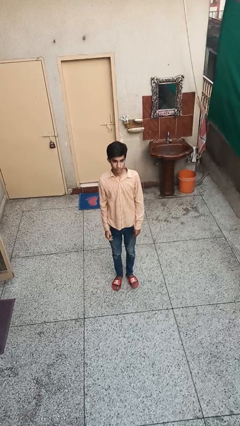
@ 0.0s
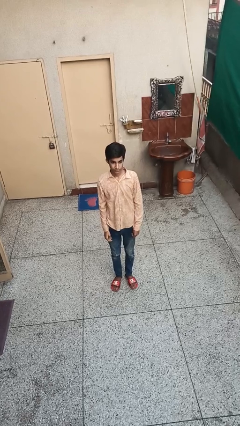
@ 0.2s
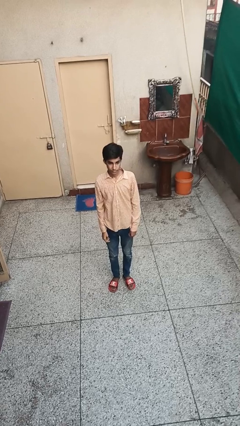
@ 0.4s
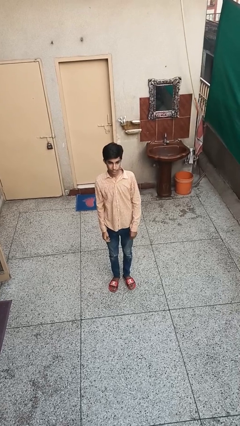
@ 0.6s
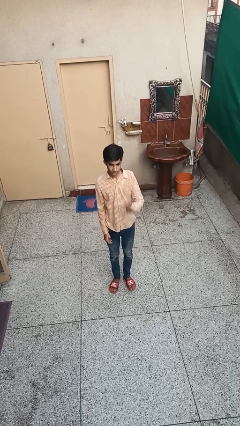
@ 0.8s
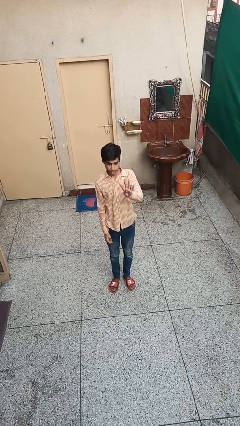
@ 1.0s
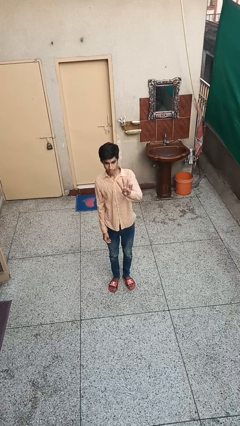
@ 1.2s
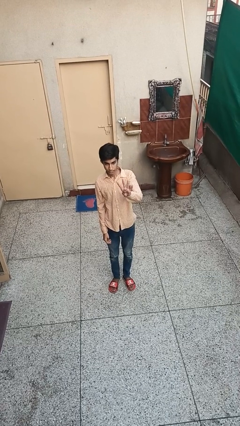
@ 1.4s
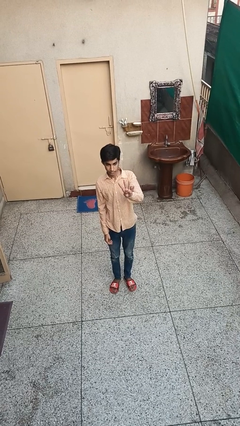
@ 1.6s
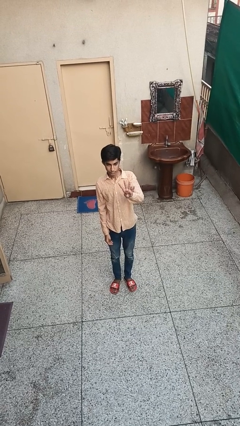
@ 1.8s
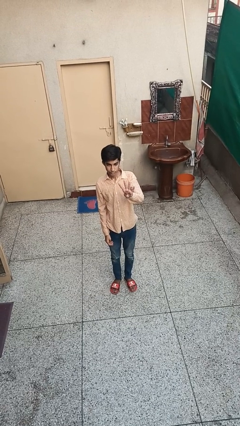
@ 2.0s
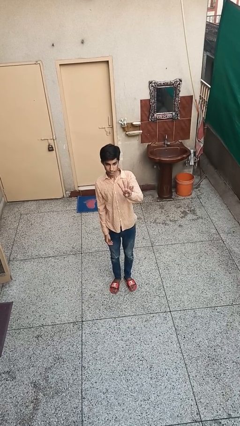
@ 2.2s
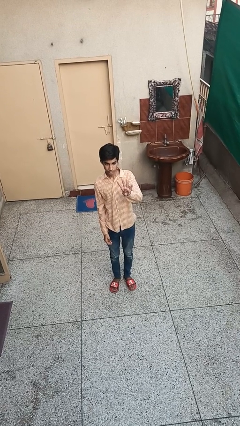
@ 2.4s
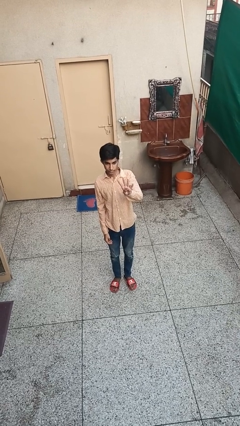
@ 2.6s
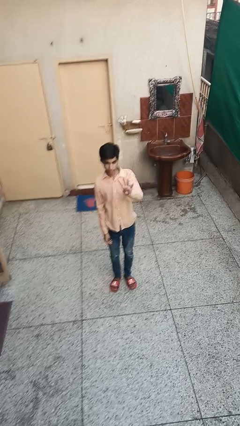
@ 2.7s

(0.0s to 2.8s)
person gestures number four

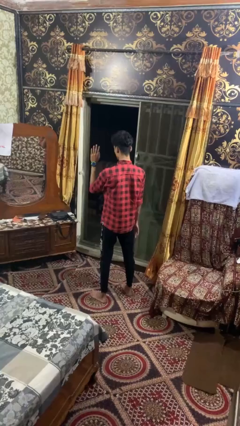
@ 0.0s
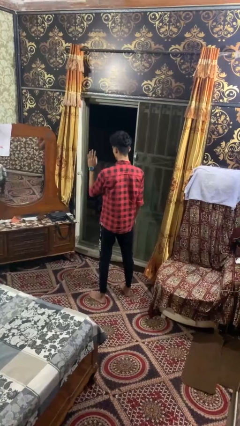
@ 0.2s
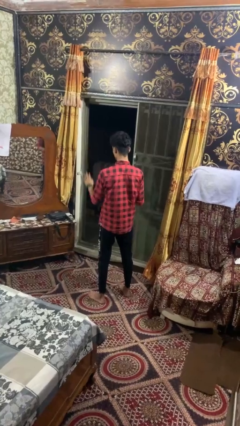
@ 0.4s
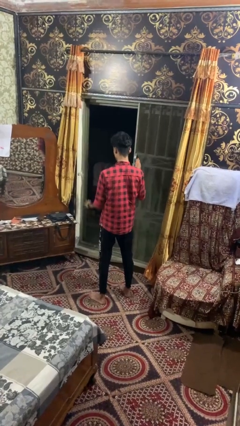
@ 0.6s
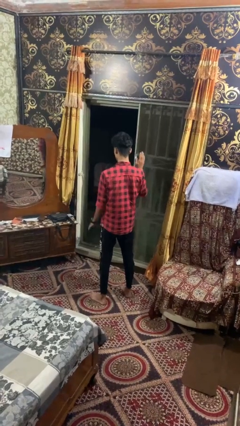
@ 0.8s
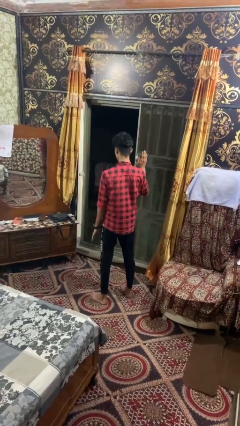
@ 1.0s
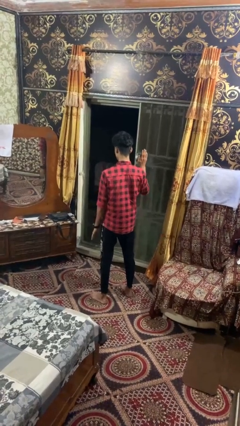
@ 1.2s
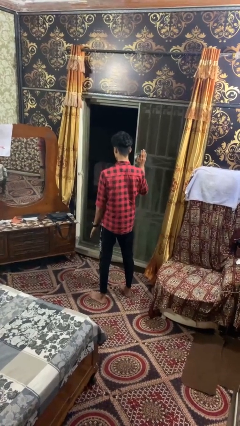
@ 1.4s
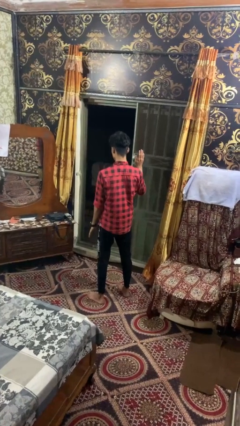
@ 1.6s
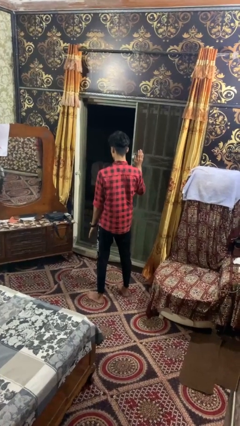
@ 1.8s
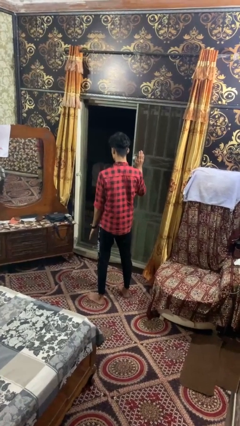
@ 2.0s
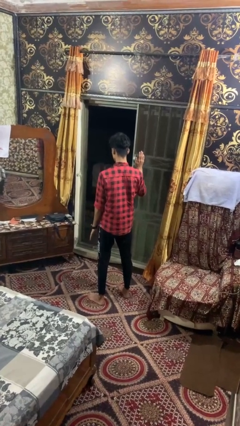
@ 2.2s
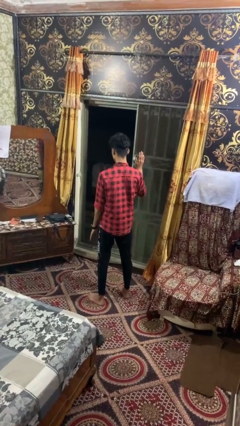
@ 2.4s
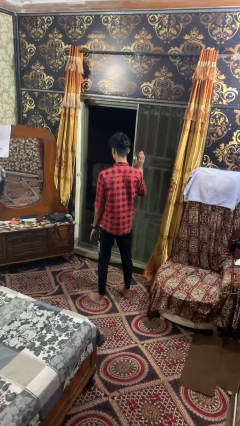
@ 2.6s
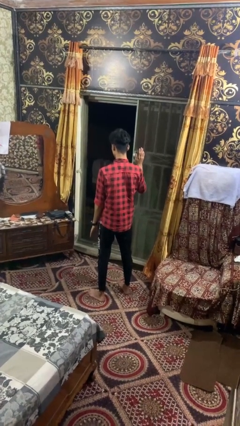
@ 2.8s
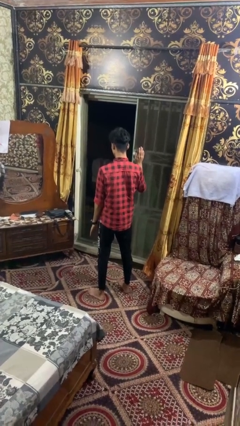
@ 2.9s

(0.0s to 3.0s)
person gestures swipe right

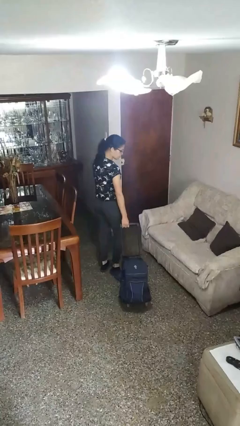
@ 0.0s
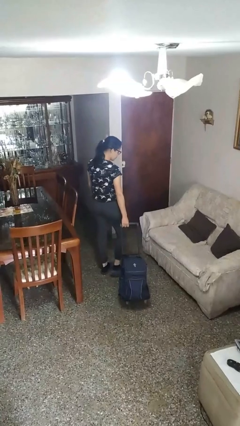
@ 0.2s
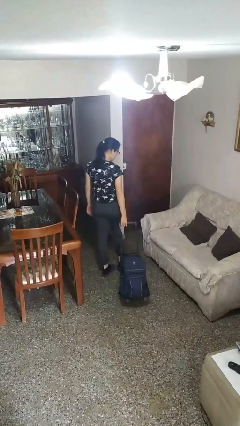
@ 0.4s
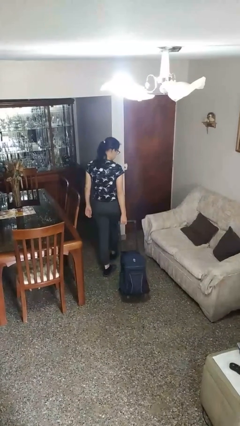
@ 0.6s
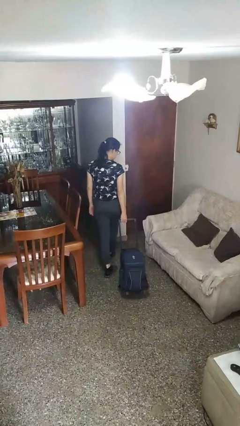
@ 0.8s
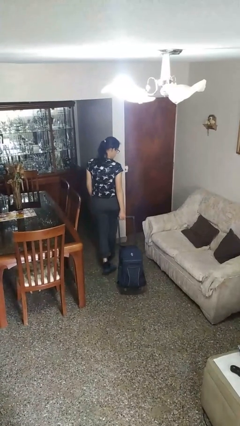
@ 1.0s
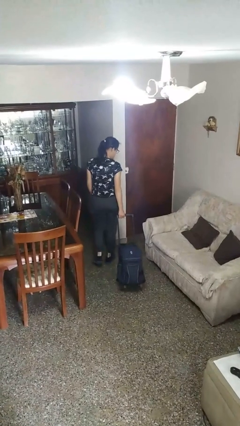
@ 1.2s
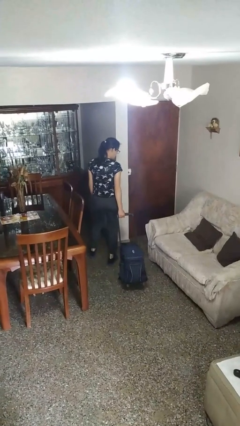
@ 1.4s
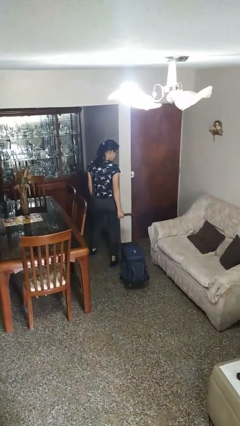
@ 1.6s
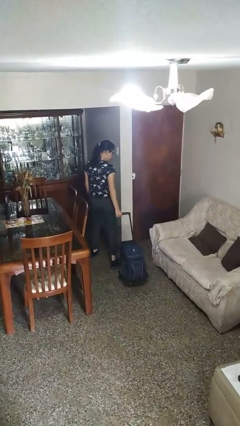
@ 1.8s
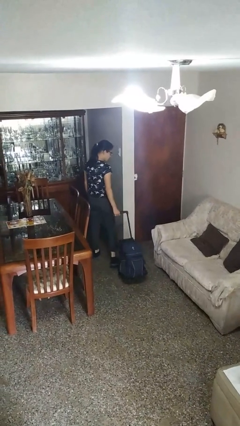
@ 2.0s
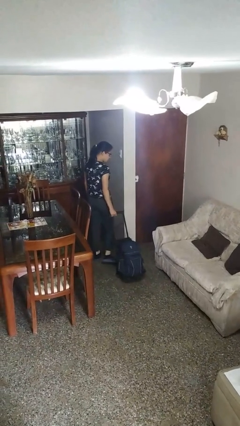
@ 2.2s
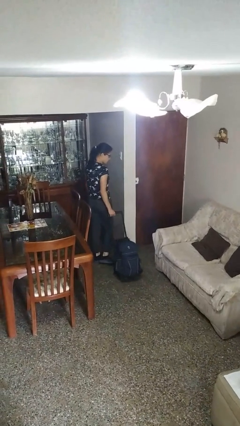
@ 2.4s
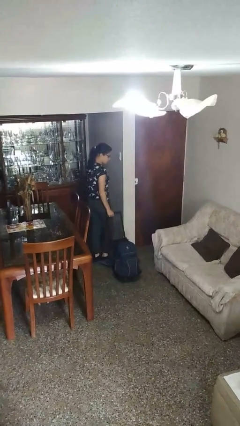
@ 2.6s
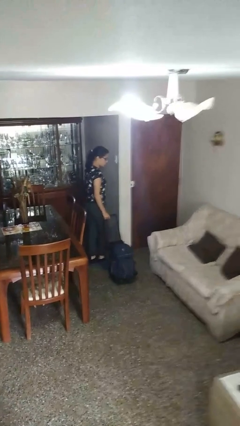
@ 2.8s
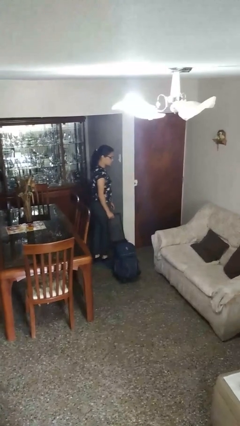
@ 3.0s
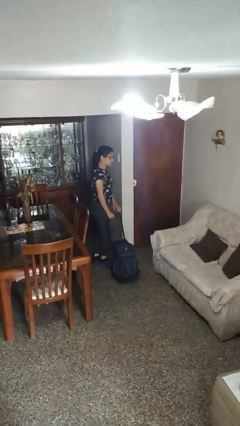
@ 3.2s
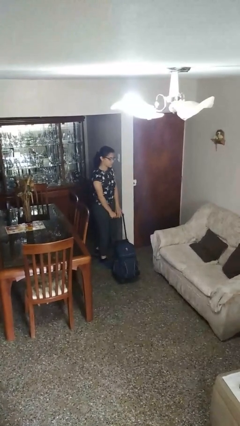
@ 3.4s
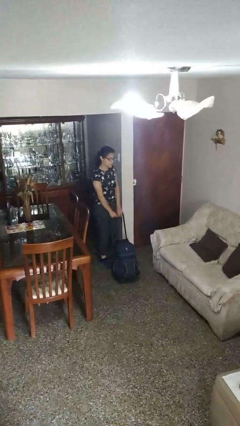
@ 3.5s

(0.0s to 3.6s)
person pulls wheeled cart

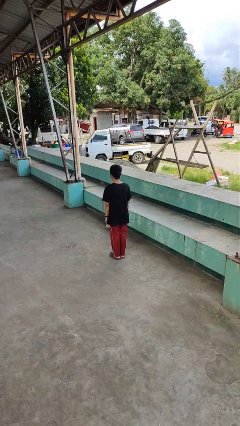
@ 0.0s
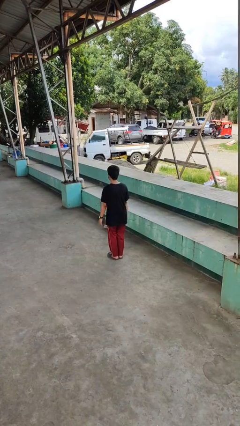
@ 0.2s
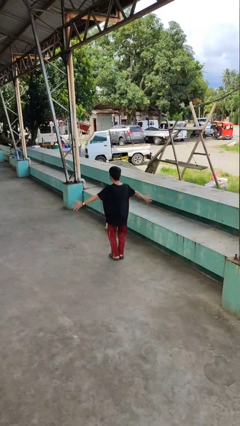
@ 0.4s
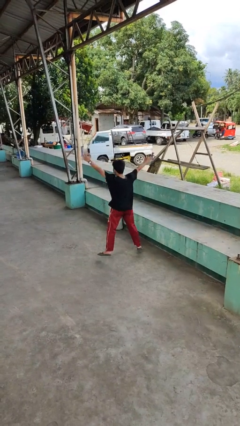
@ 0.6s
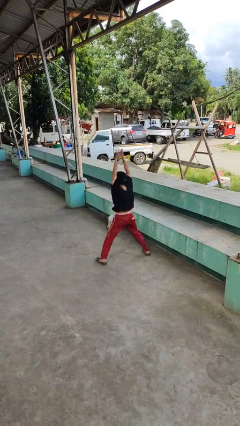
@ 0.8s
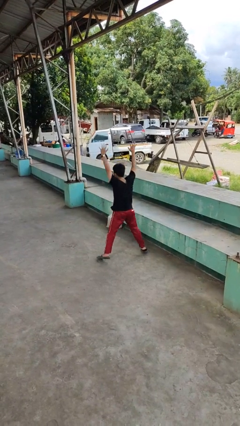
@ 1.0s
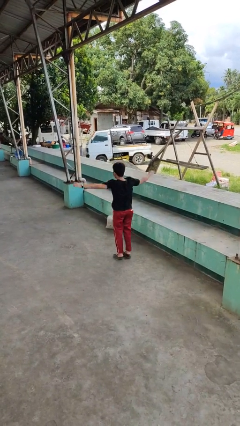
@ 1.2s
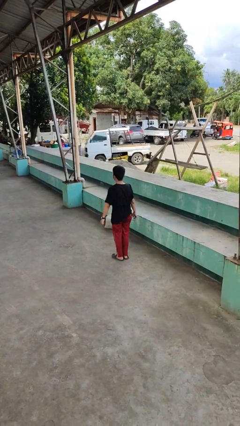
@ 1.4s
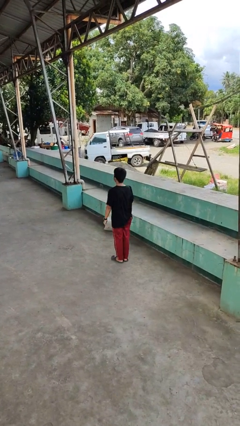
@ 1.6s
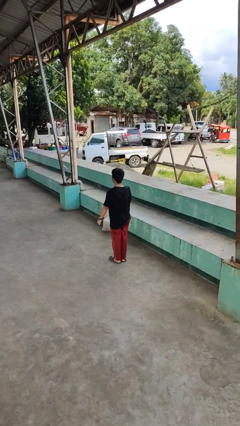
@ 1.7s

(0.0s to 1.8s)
person exercises with jumping jacks

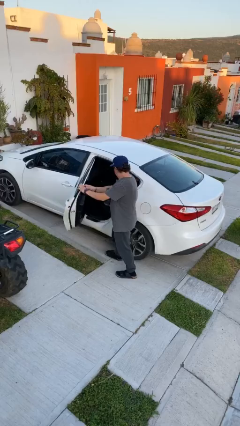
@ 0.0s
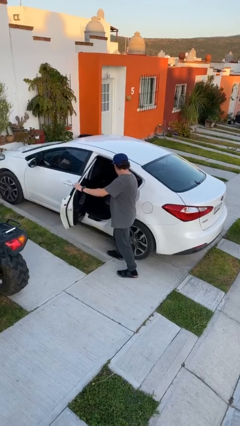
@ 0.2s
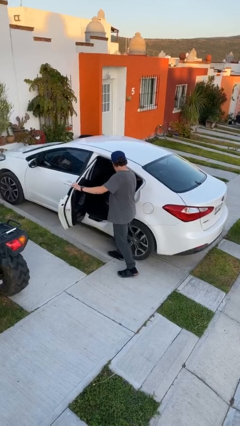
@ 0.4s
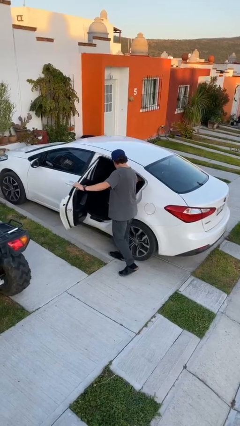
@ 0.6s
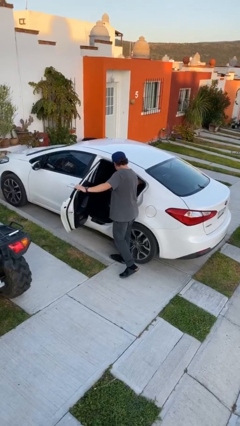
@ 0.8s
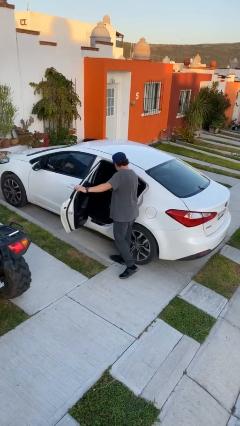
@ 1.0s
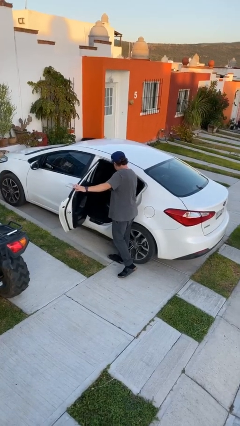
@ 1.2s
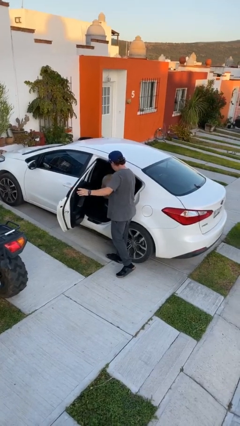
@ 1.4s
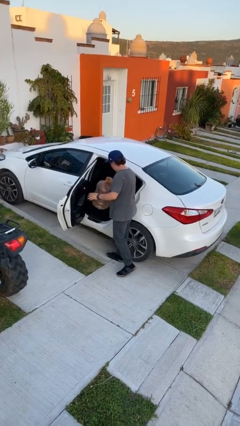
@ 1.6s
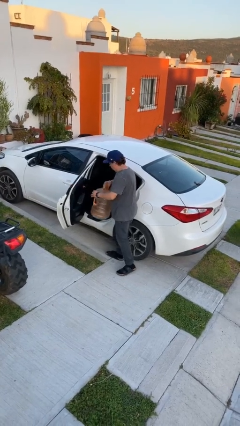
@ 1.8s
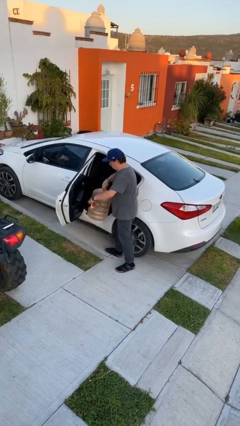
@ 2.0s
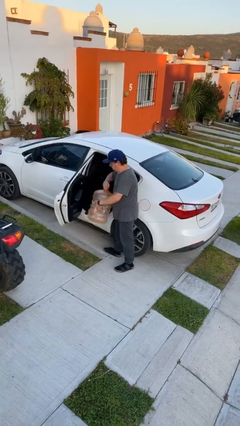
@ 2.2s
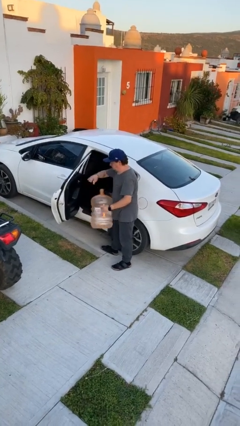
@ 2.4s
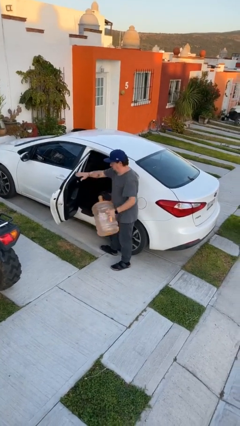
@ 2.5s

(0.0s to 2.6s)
person unloads car

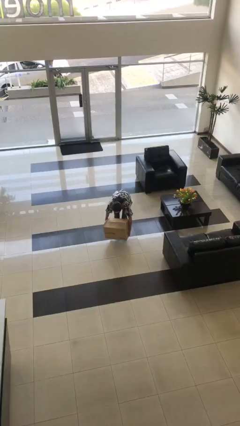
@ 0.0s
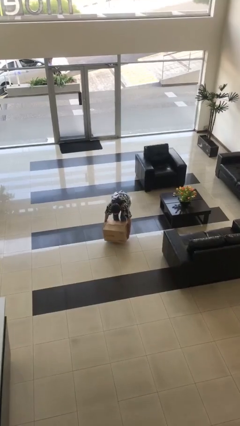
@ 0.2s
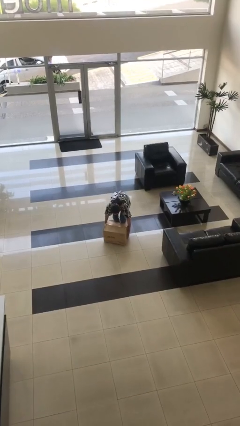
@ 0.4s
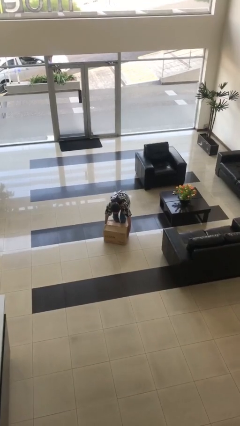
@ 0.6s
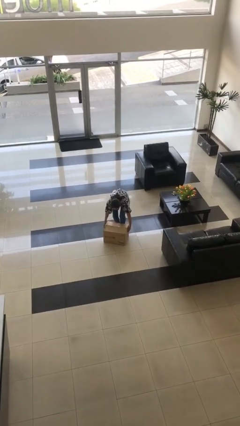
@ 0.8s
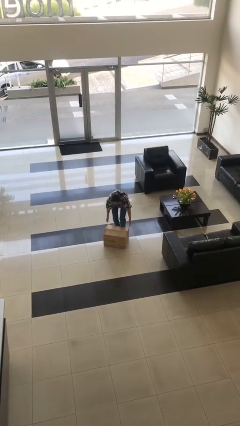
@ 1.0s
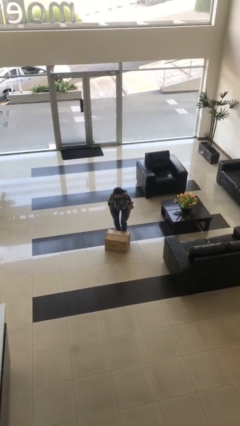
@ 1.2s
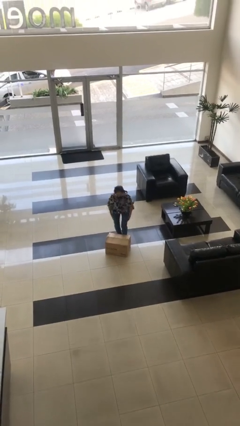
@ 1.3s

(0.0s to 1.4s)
person puts down object on floor

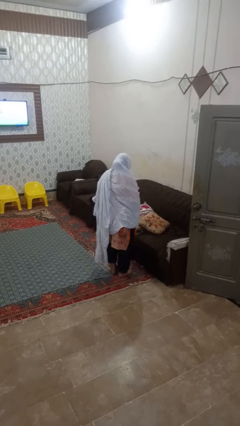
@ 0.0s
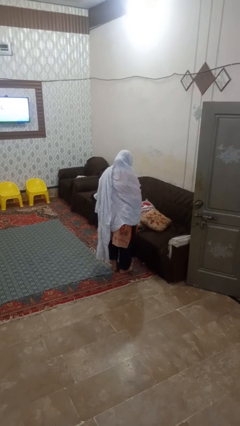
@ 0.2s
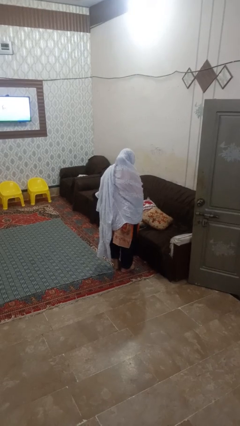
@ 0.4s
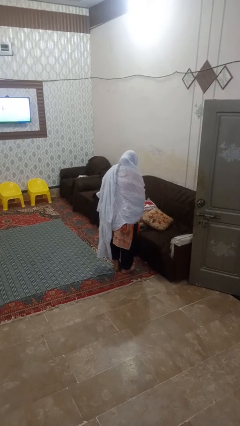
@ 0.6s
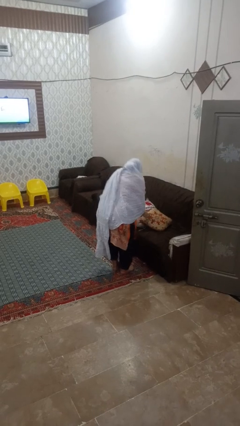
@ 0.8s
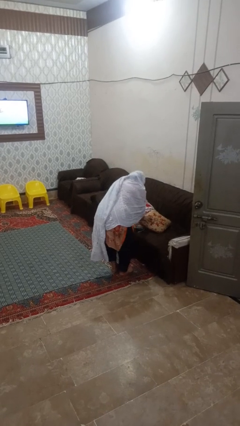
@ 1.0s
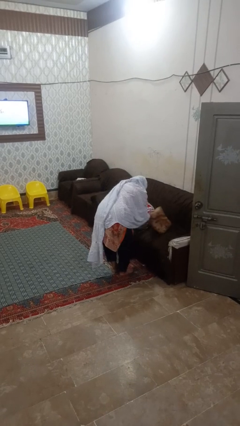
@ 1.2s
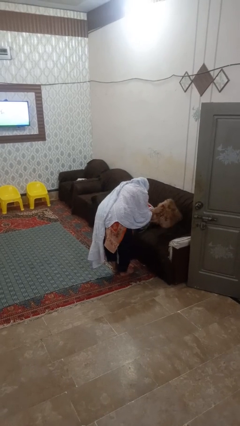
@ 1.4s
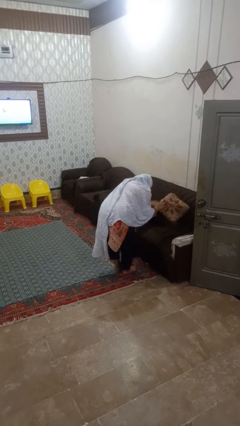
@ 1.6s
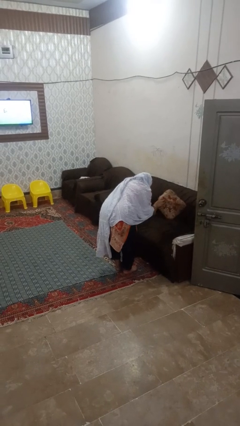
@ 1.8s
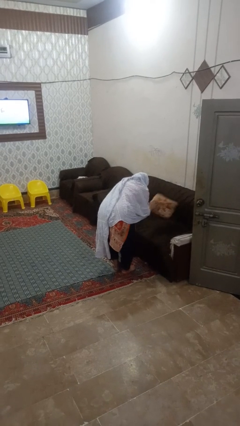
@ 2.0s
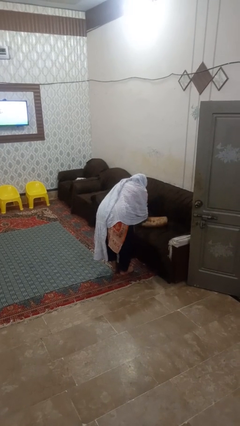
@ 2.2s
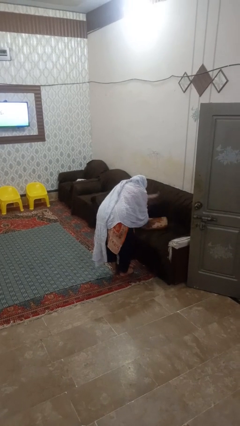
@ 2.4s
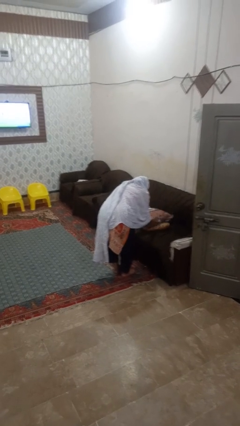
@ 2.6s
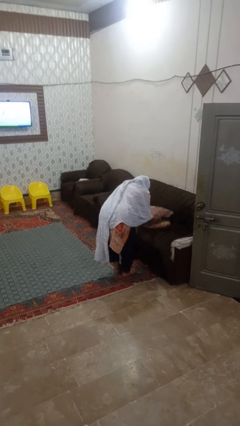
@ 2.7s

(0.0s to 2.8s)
person searches in couch
